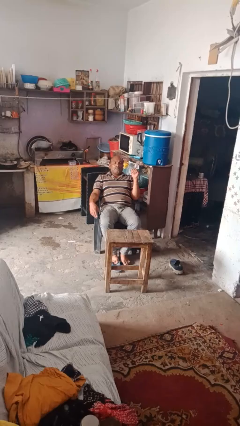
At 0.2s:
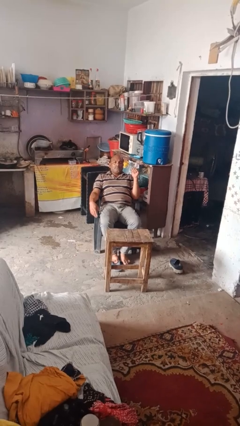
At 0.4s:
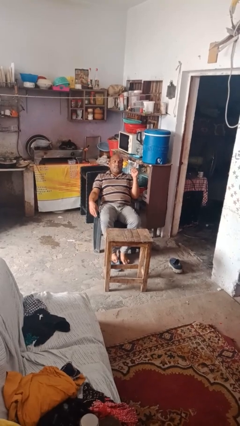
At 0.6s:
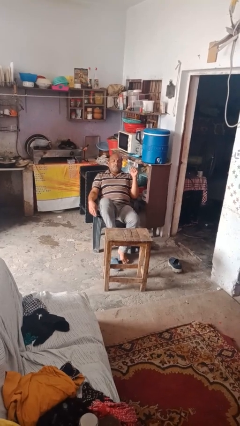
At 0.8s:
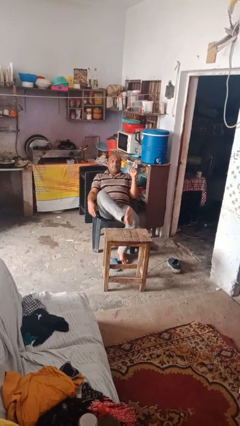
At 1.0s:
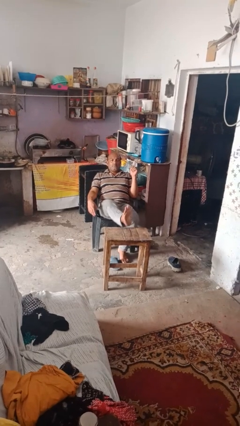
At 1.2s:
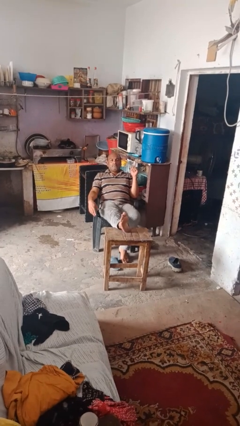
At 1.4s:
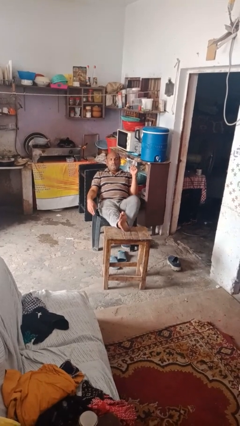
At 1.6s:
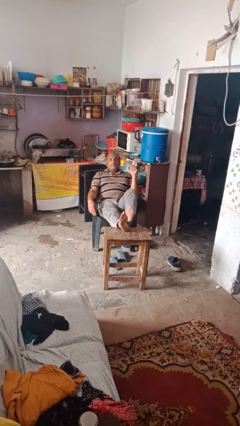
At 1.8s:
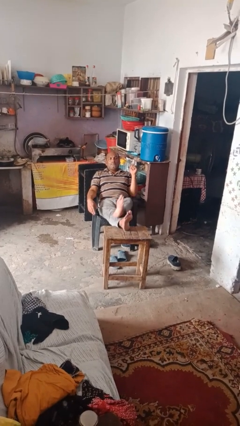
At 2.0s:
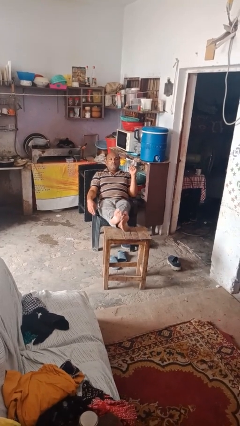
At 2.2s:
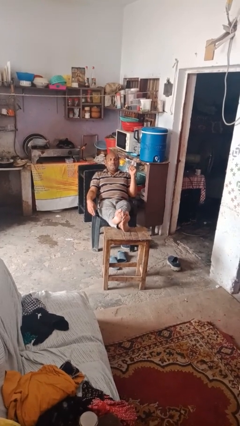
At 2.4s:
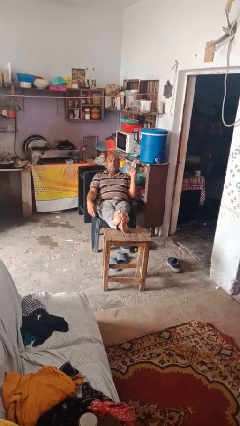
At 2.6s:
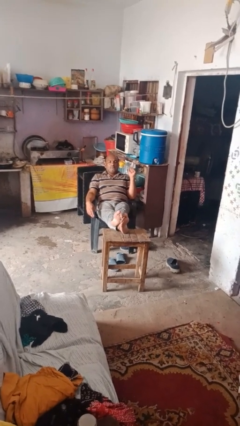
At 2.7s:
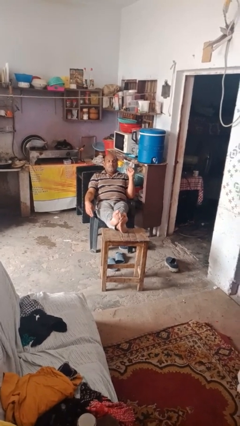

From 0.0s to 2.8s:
person puts feet up

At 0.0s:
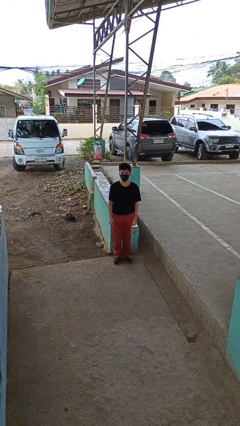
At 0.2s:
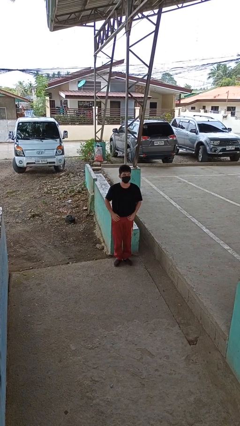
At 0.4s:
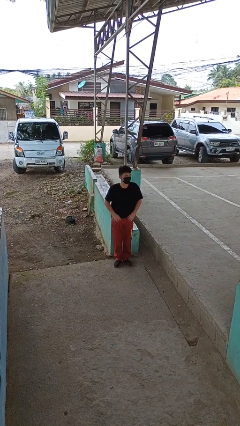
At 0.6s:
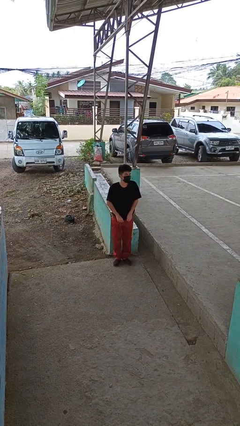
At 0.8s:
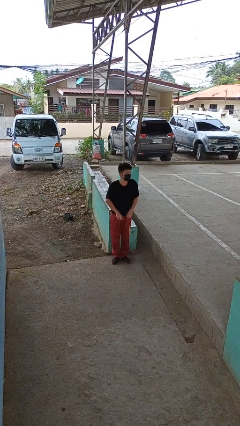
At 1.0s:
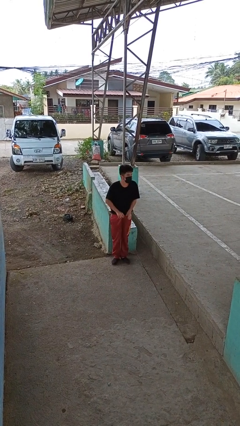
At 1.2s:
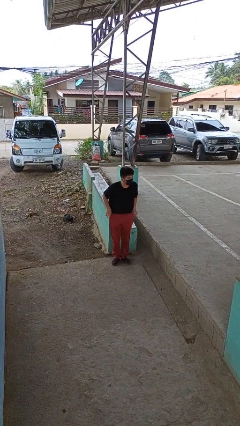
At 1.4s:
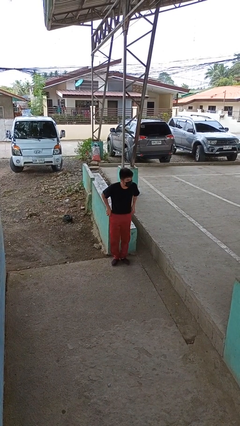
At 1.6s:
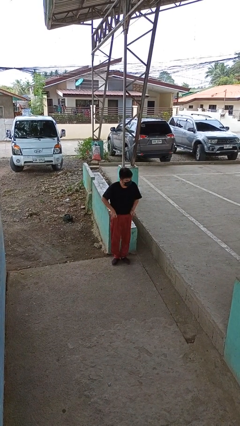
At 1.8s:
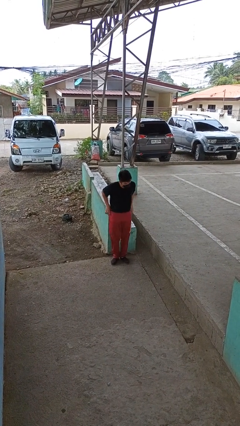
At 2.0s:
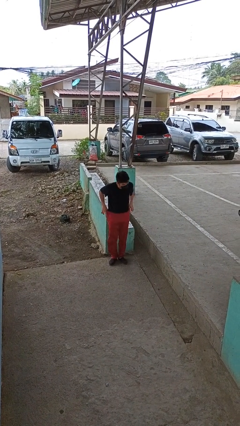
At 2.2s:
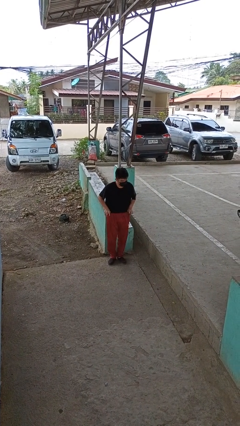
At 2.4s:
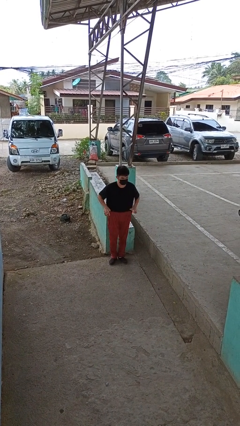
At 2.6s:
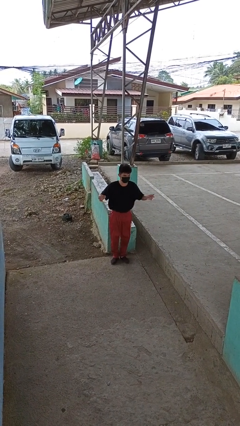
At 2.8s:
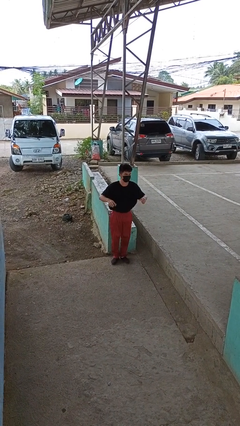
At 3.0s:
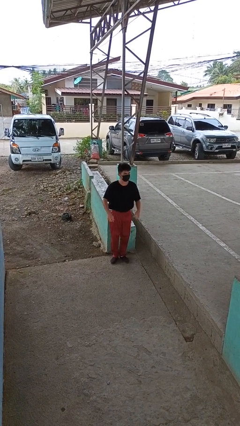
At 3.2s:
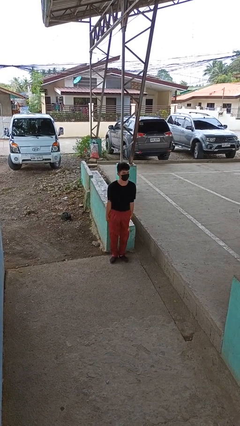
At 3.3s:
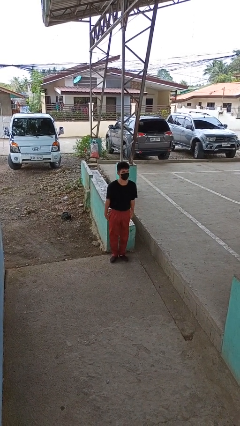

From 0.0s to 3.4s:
person hikes up pants

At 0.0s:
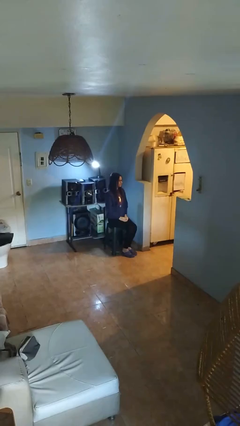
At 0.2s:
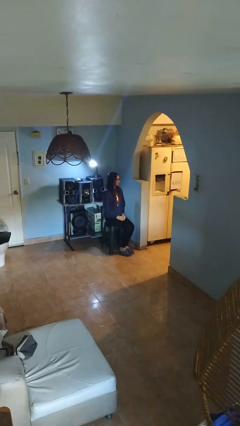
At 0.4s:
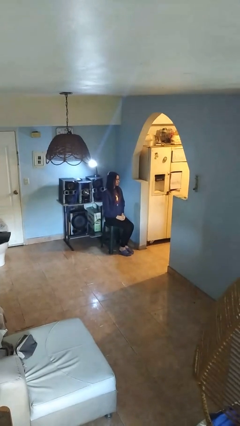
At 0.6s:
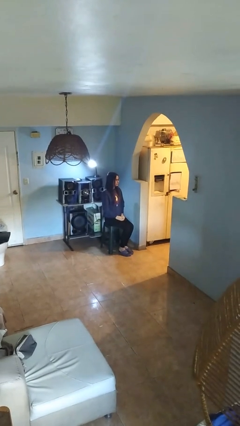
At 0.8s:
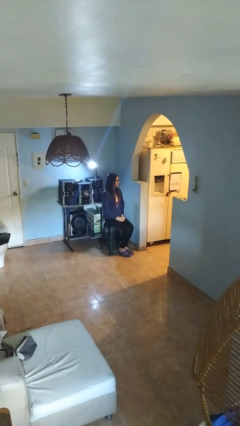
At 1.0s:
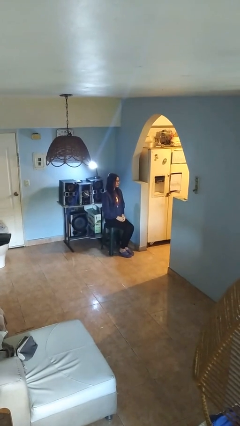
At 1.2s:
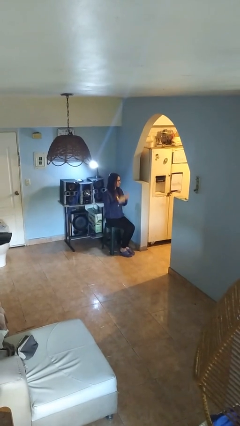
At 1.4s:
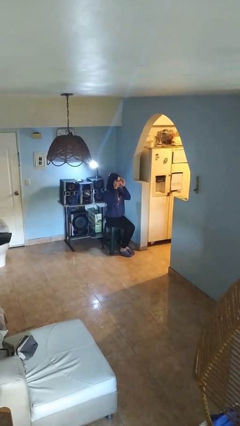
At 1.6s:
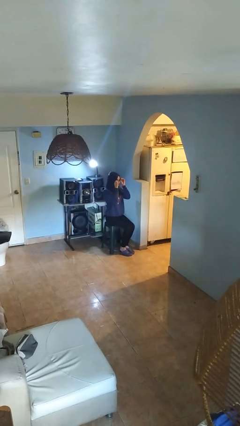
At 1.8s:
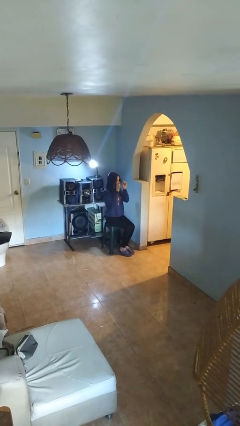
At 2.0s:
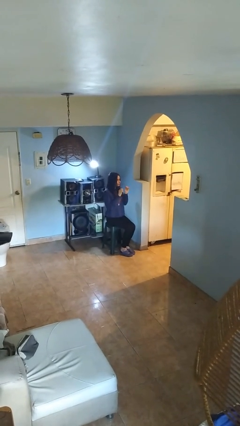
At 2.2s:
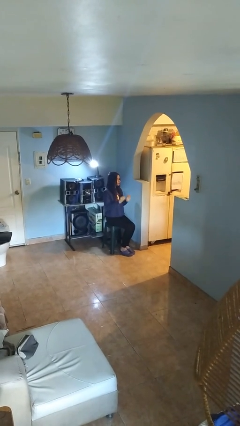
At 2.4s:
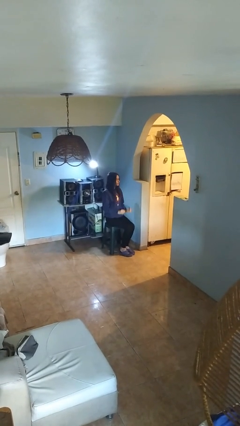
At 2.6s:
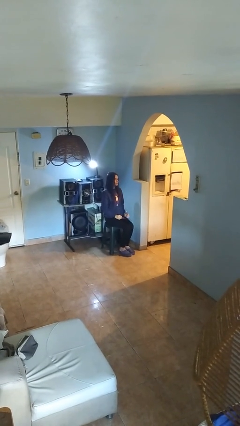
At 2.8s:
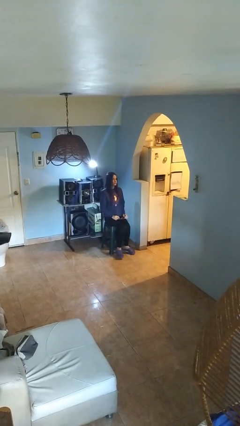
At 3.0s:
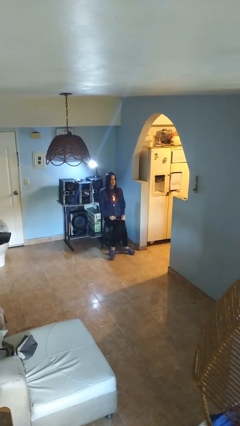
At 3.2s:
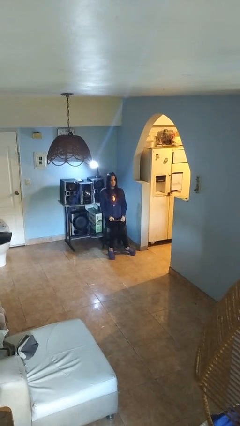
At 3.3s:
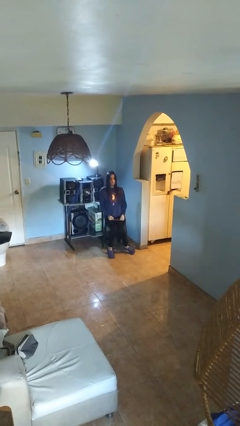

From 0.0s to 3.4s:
person takes off glasses

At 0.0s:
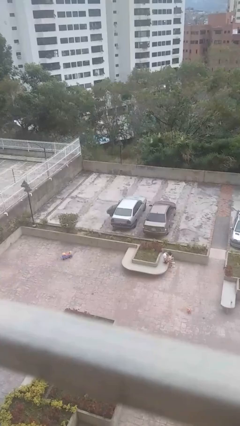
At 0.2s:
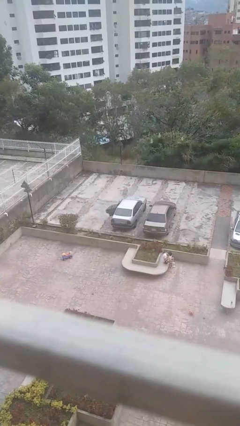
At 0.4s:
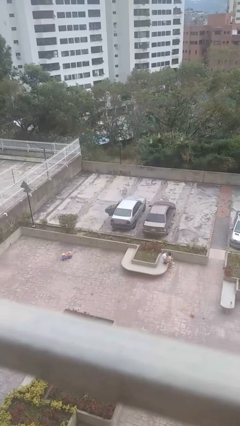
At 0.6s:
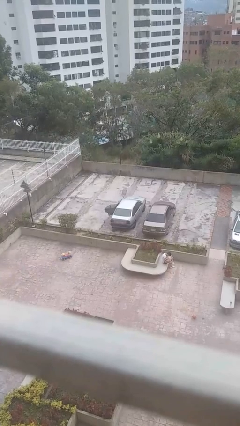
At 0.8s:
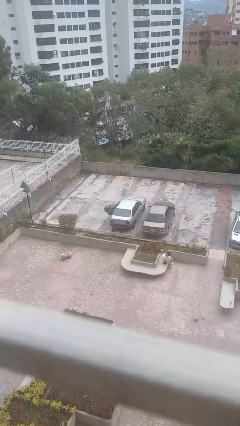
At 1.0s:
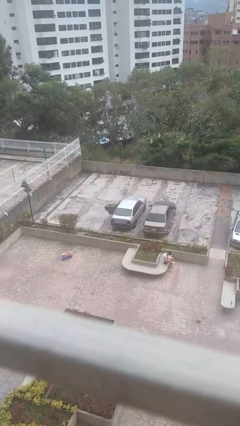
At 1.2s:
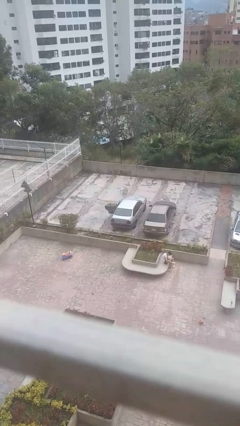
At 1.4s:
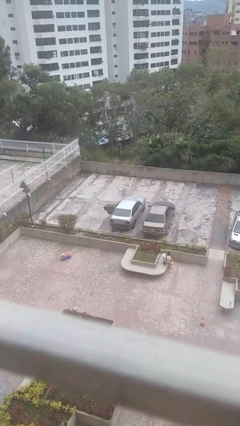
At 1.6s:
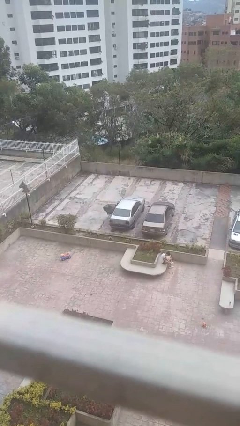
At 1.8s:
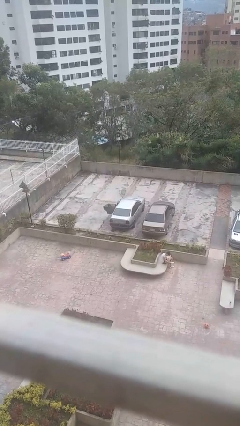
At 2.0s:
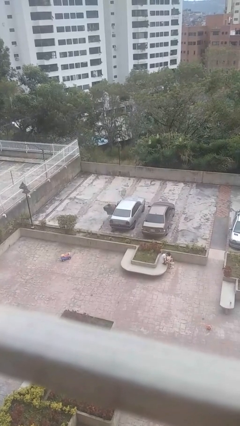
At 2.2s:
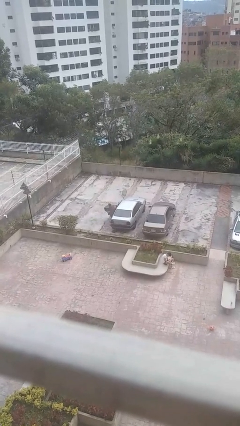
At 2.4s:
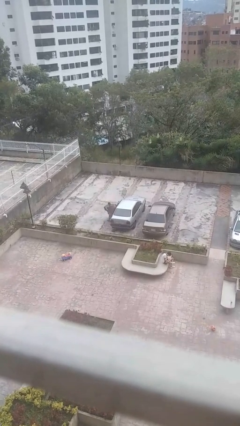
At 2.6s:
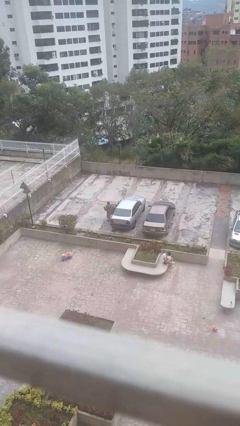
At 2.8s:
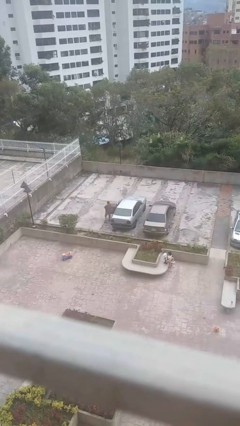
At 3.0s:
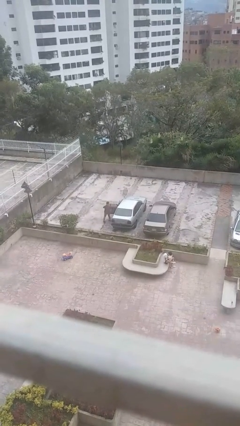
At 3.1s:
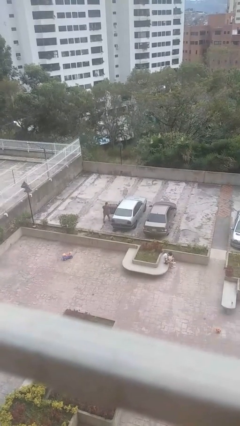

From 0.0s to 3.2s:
car drops off person

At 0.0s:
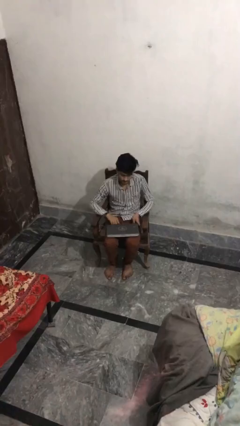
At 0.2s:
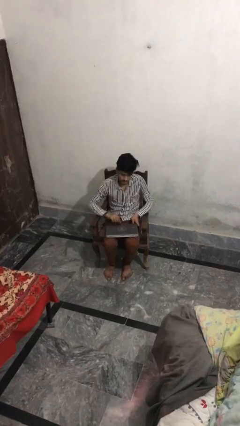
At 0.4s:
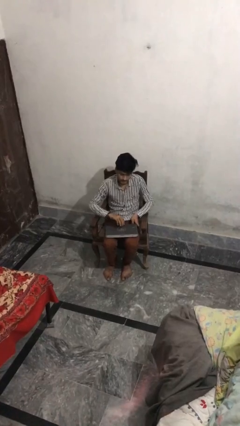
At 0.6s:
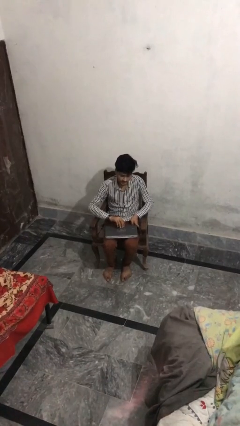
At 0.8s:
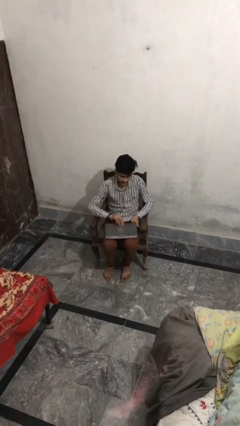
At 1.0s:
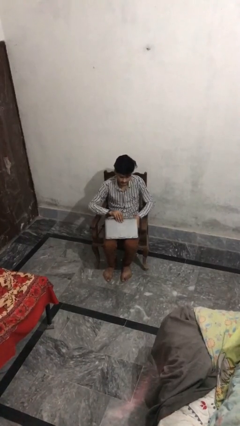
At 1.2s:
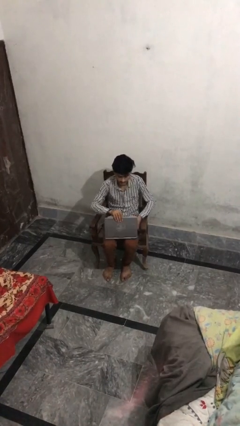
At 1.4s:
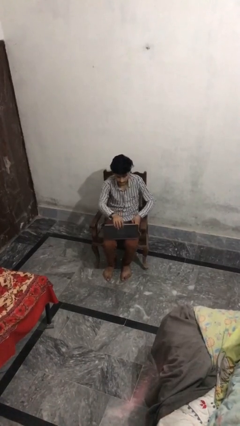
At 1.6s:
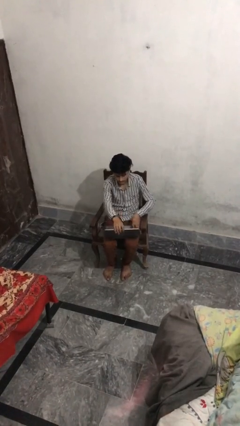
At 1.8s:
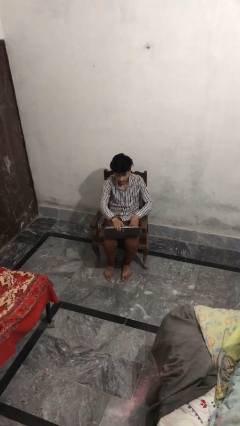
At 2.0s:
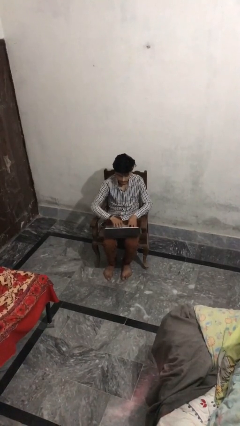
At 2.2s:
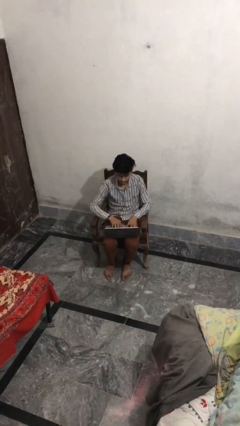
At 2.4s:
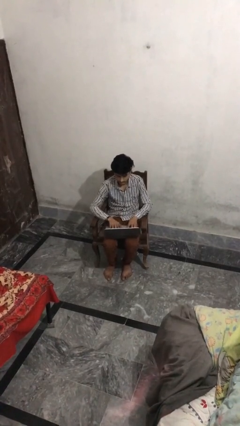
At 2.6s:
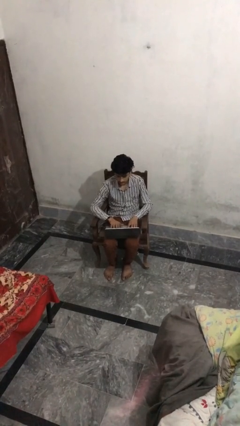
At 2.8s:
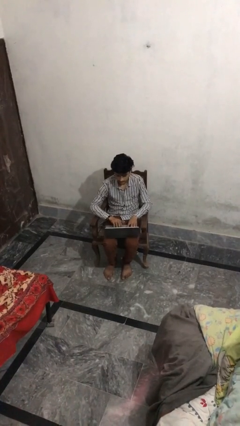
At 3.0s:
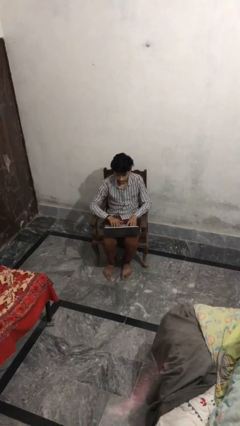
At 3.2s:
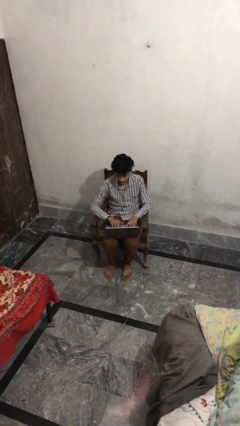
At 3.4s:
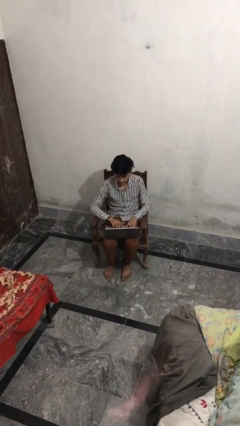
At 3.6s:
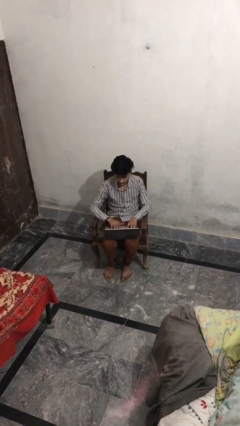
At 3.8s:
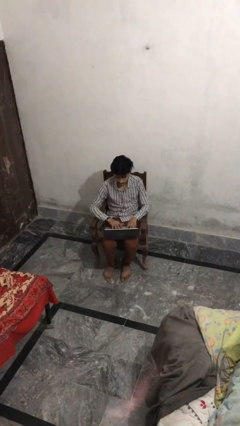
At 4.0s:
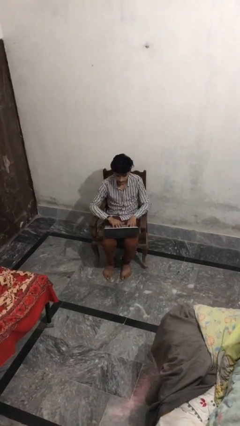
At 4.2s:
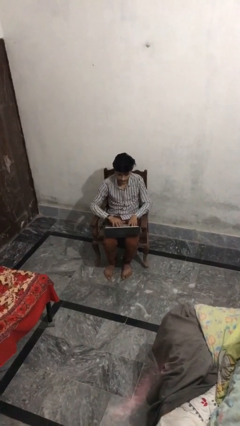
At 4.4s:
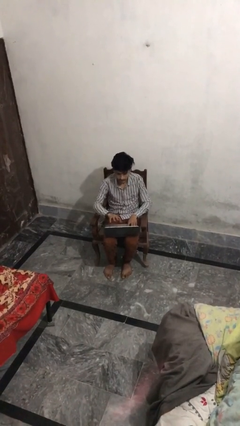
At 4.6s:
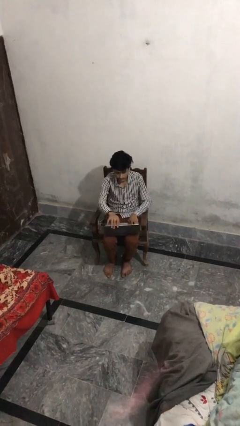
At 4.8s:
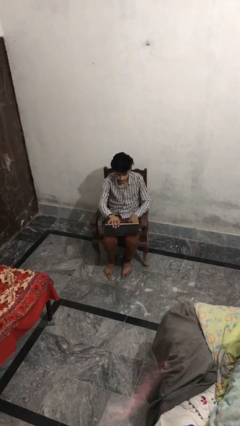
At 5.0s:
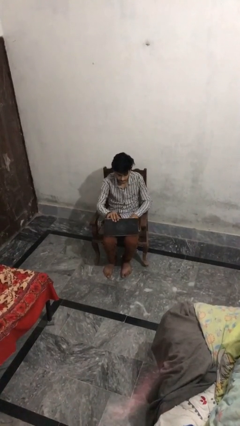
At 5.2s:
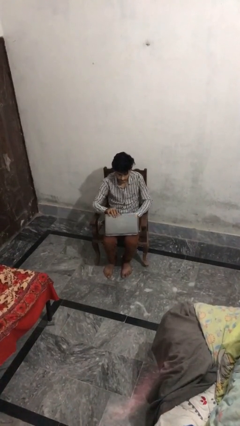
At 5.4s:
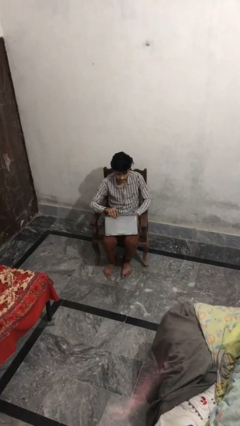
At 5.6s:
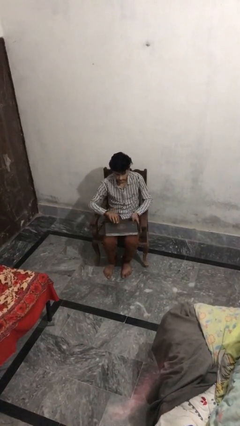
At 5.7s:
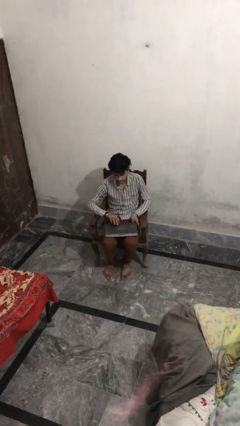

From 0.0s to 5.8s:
person interacts with laptop
